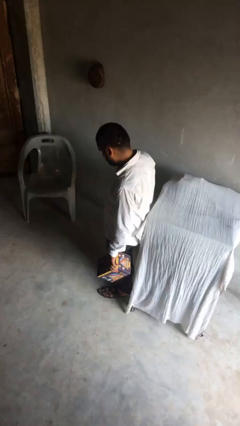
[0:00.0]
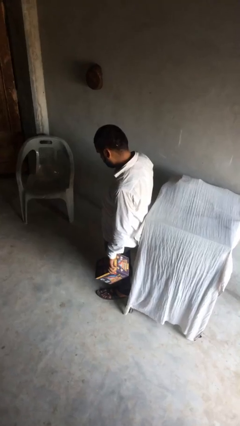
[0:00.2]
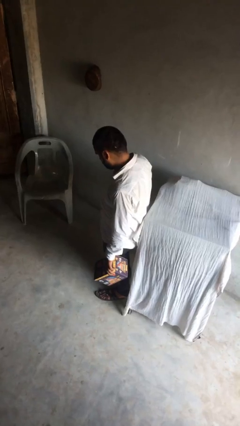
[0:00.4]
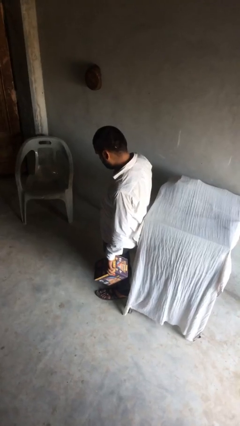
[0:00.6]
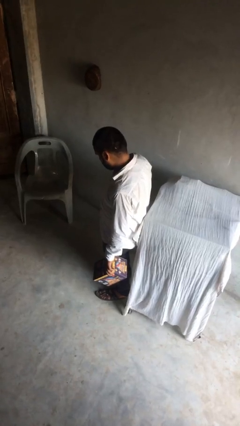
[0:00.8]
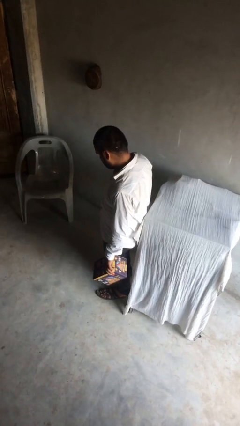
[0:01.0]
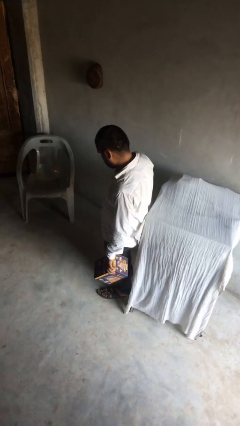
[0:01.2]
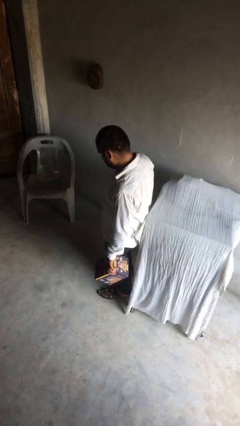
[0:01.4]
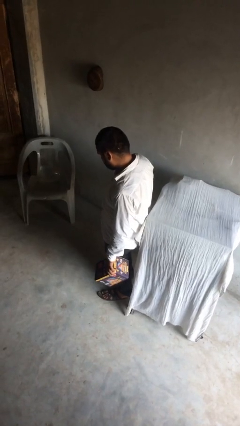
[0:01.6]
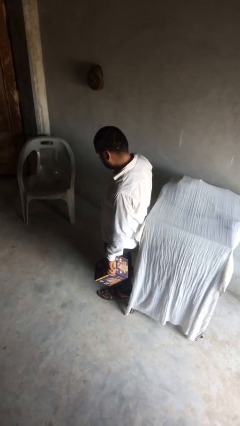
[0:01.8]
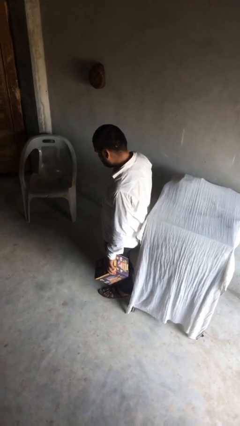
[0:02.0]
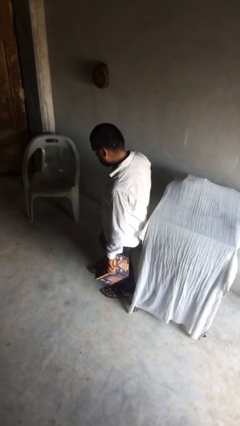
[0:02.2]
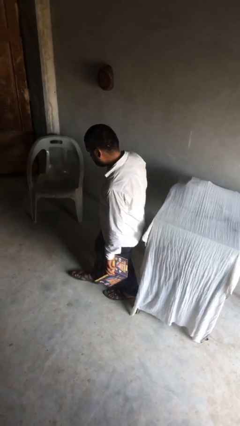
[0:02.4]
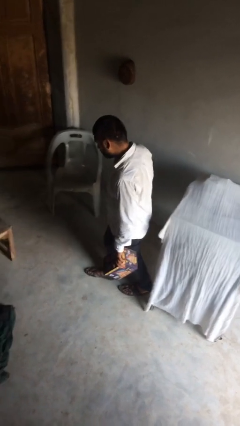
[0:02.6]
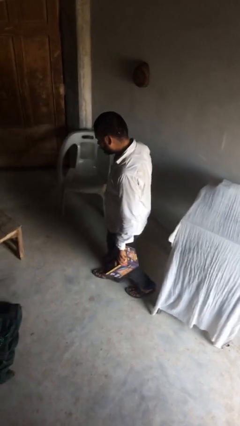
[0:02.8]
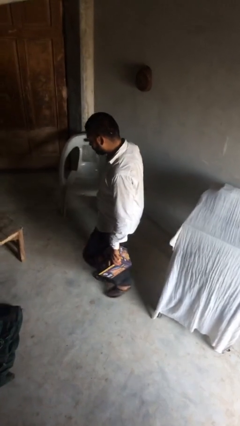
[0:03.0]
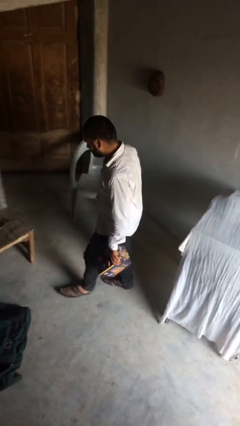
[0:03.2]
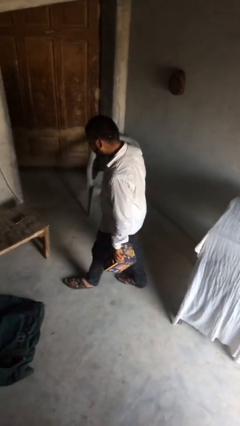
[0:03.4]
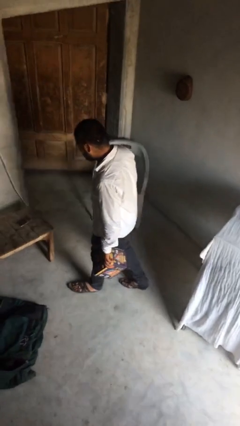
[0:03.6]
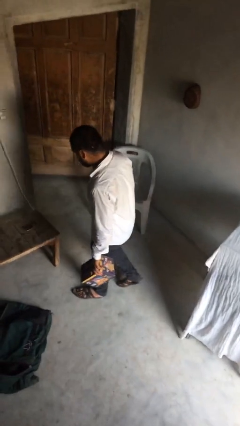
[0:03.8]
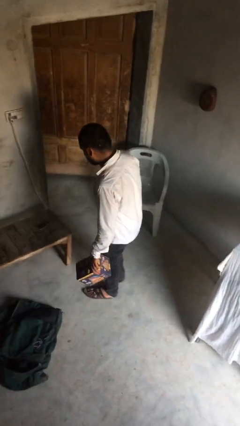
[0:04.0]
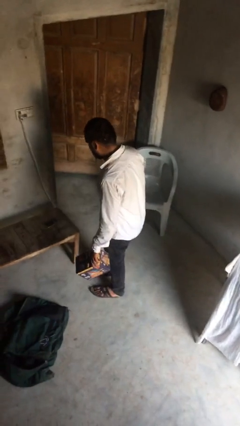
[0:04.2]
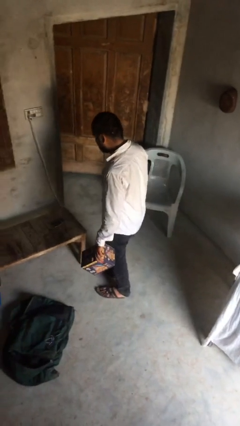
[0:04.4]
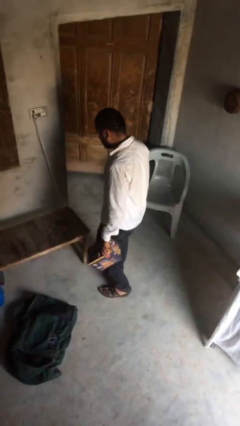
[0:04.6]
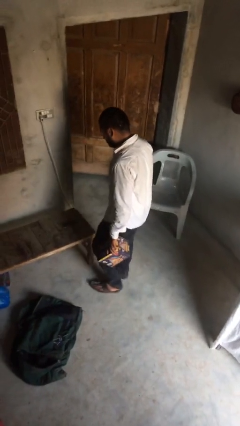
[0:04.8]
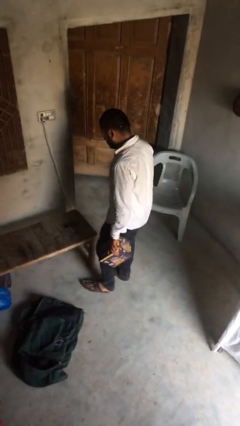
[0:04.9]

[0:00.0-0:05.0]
person puts down object on table

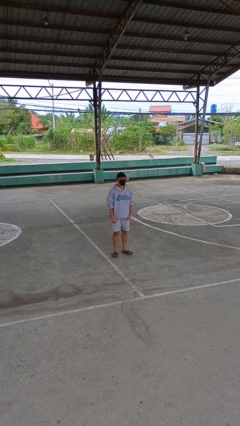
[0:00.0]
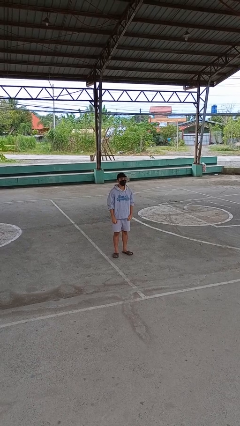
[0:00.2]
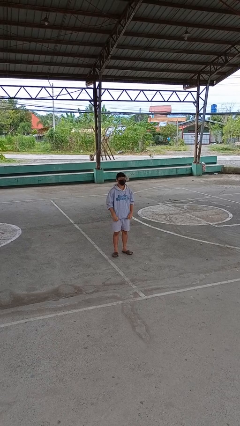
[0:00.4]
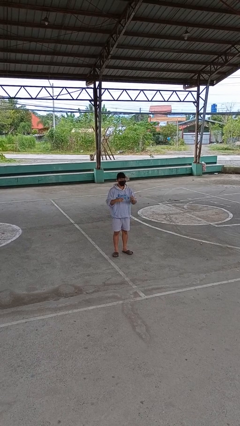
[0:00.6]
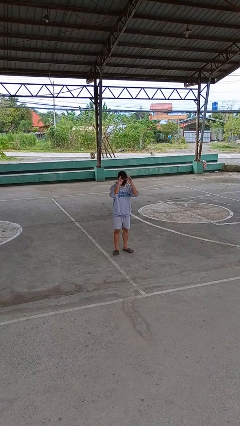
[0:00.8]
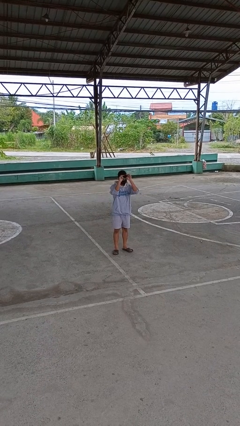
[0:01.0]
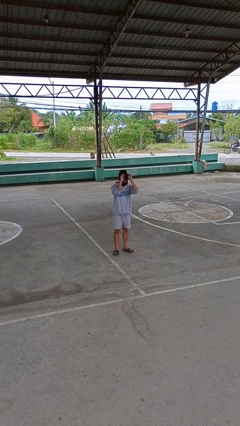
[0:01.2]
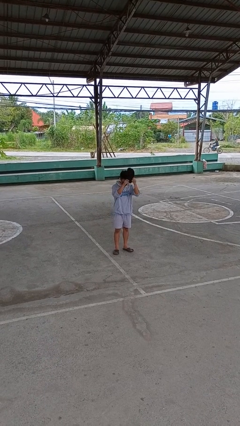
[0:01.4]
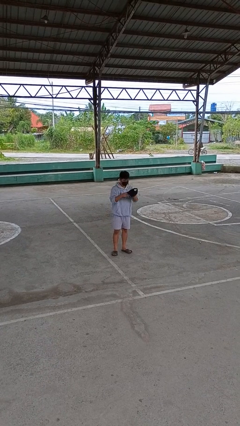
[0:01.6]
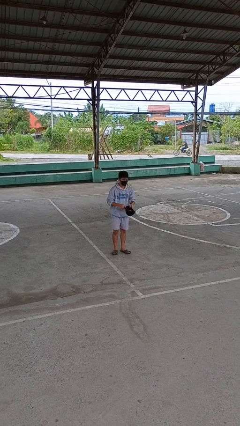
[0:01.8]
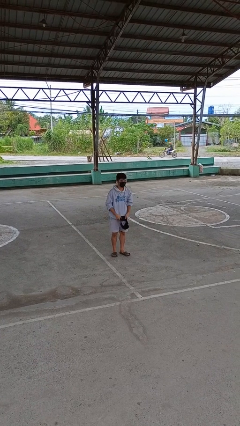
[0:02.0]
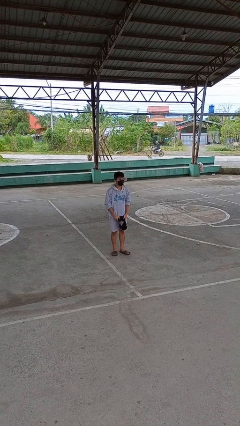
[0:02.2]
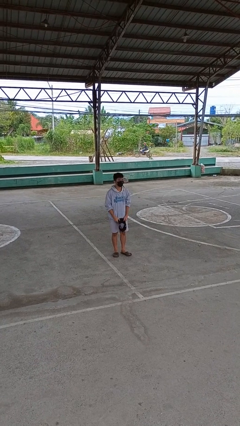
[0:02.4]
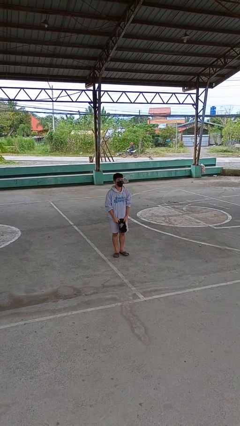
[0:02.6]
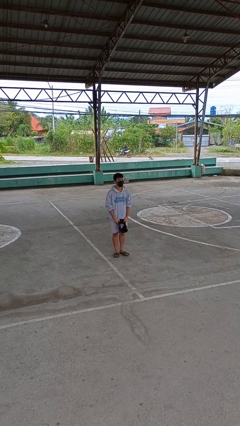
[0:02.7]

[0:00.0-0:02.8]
person takes off hat

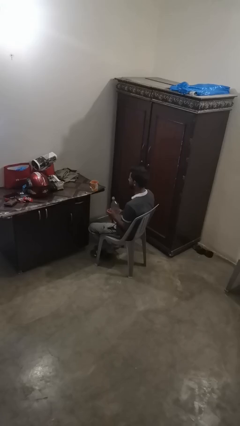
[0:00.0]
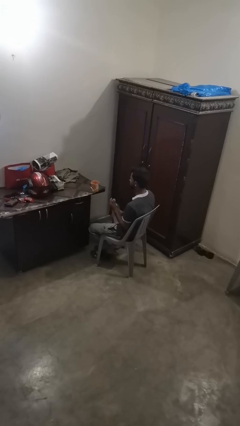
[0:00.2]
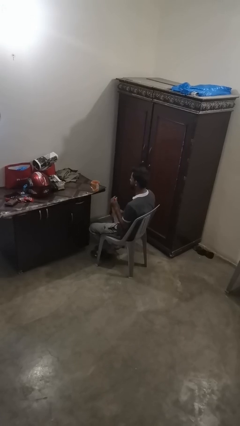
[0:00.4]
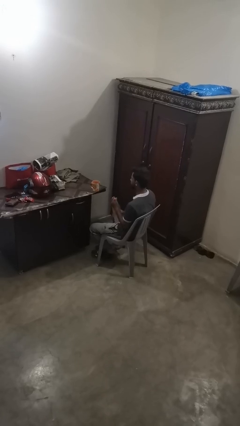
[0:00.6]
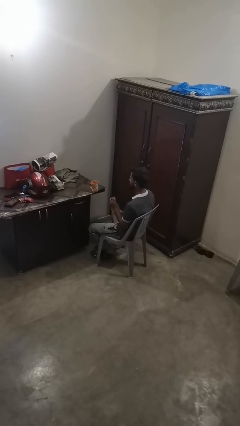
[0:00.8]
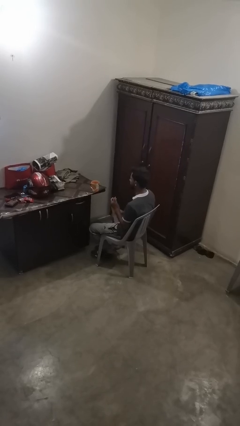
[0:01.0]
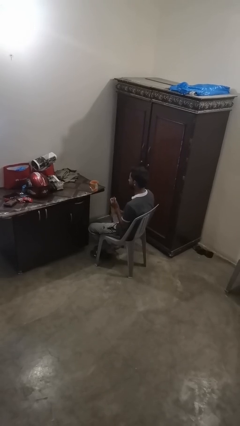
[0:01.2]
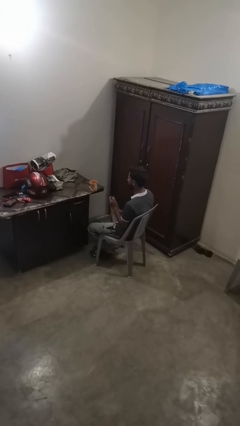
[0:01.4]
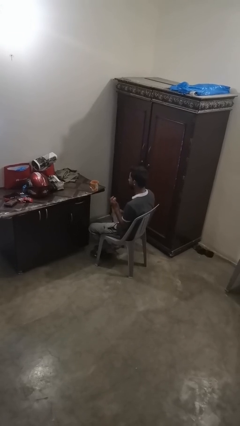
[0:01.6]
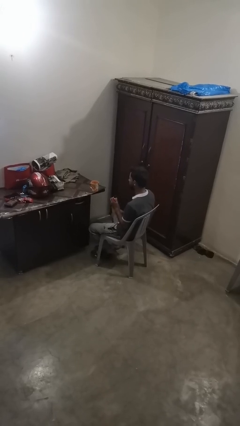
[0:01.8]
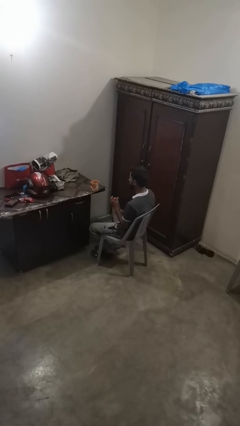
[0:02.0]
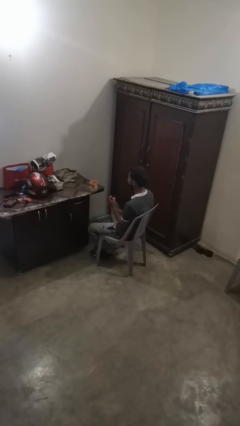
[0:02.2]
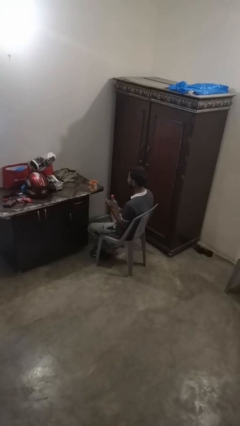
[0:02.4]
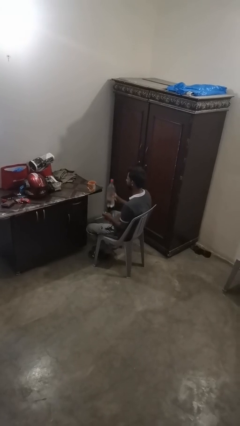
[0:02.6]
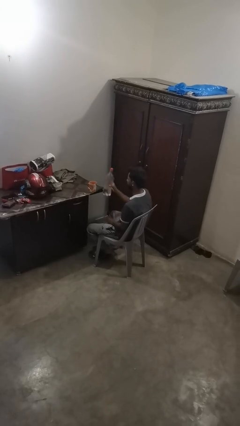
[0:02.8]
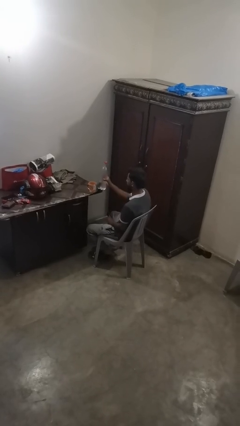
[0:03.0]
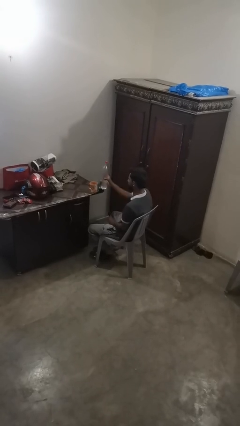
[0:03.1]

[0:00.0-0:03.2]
person screws lid to bottle

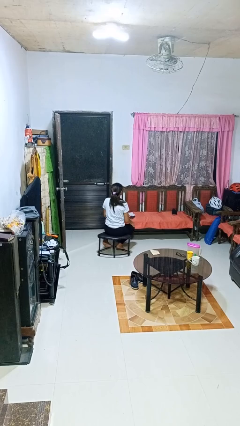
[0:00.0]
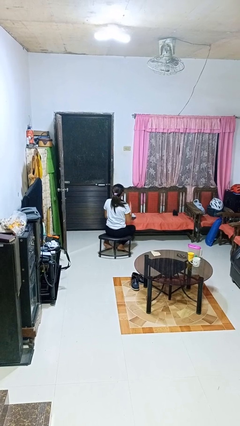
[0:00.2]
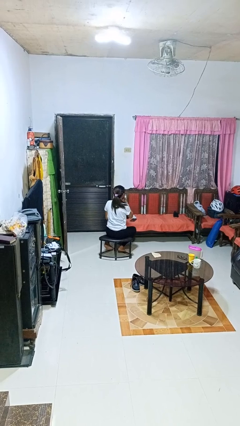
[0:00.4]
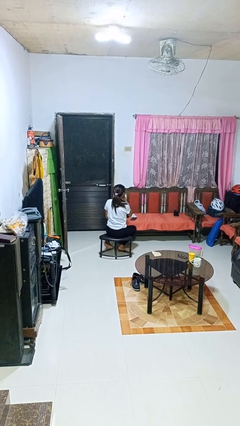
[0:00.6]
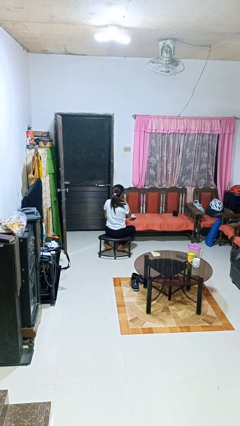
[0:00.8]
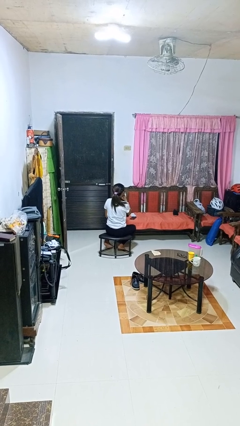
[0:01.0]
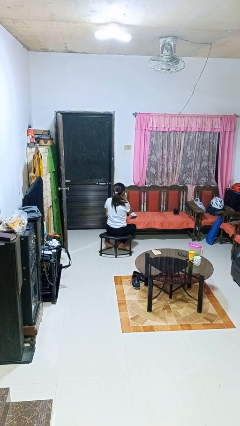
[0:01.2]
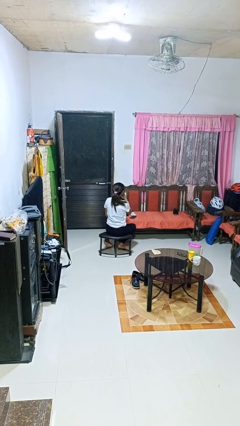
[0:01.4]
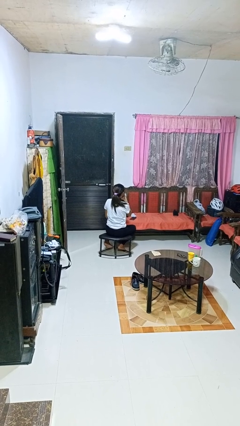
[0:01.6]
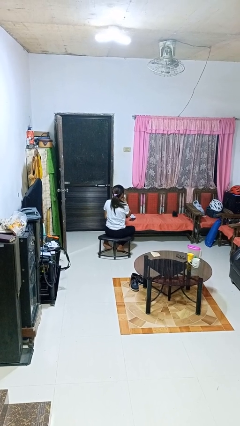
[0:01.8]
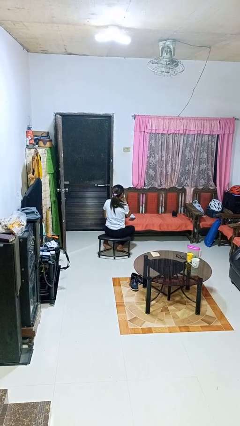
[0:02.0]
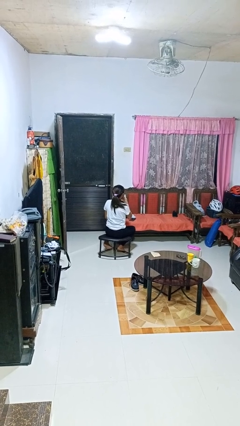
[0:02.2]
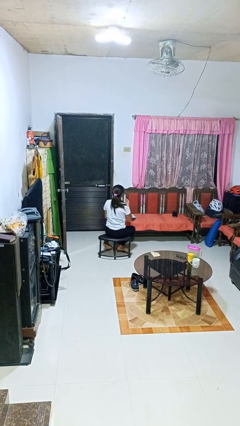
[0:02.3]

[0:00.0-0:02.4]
person strokes chin

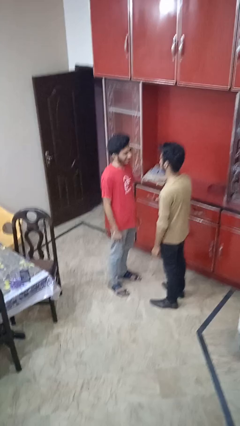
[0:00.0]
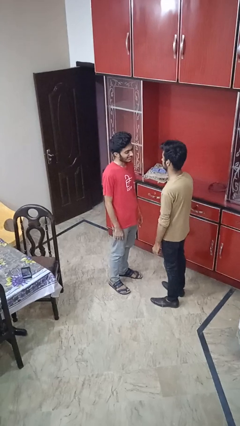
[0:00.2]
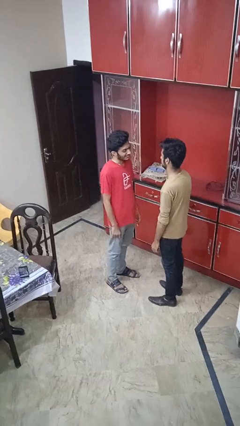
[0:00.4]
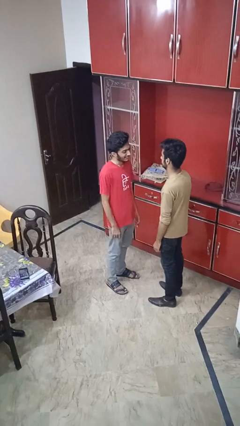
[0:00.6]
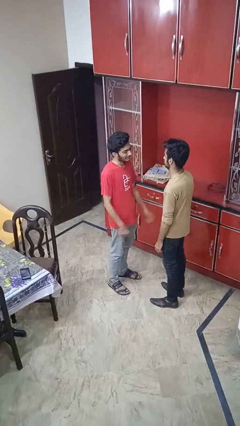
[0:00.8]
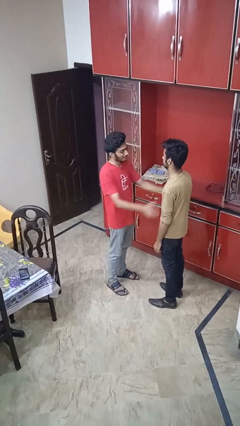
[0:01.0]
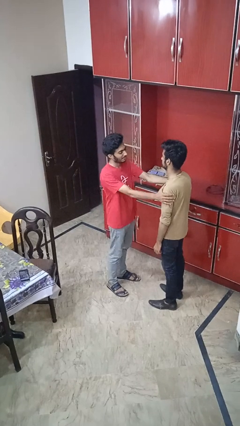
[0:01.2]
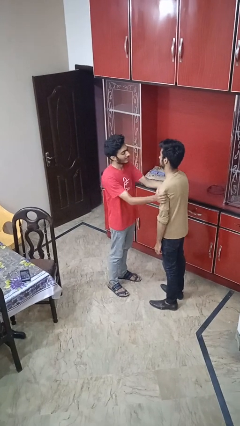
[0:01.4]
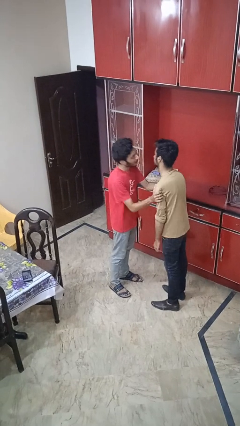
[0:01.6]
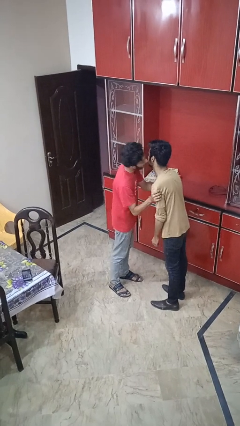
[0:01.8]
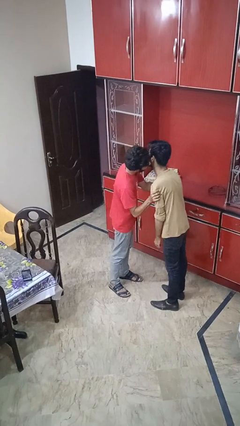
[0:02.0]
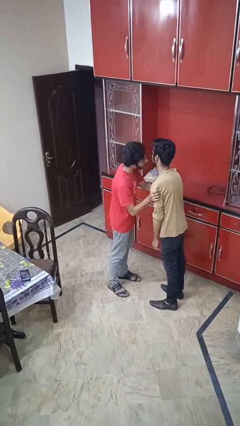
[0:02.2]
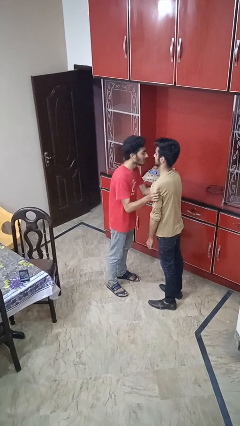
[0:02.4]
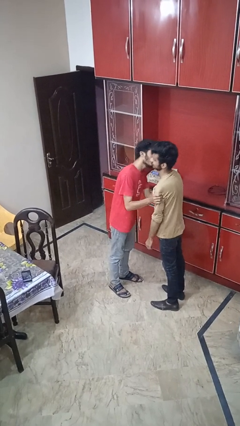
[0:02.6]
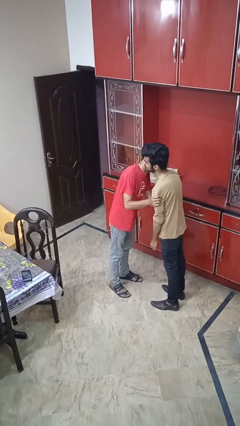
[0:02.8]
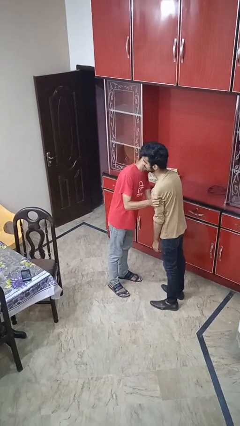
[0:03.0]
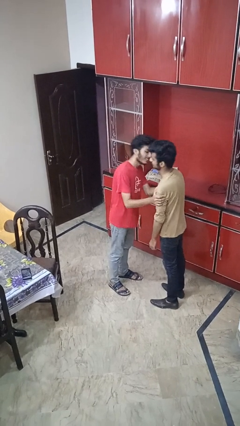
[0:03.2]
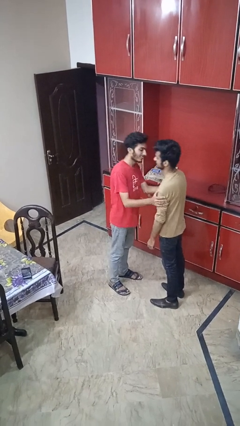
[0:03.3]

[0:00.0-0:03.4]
person kisses cheek of person

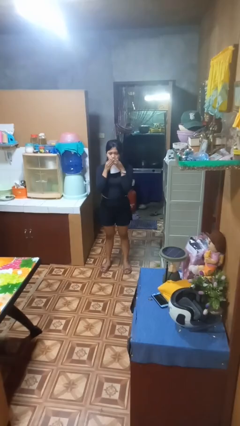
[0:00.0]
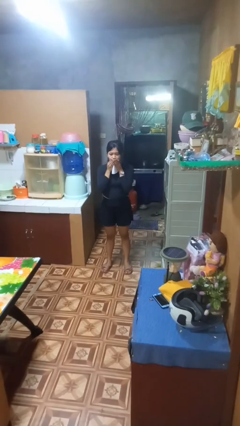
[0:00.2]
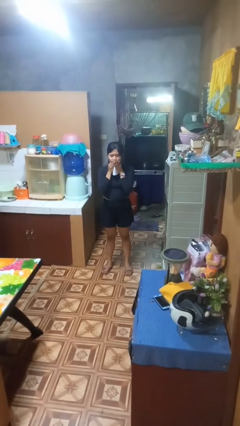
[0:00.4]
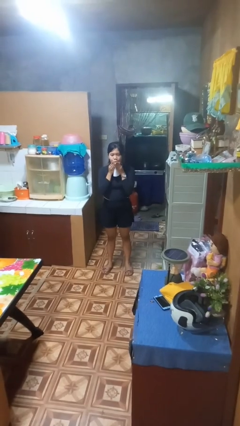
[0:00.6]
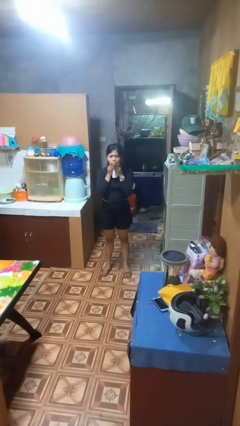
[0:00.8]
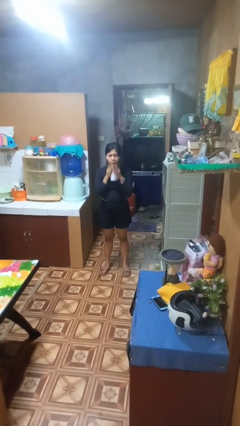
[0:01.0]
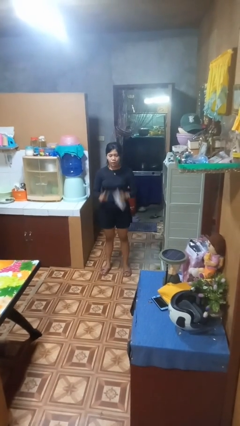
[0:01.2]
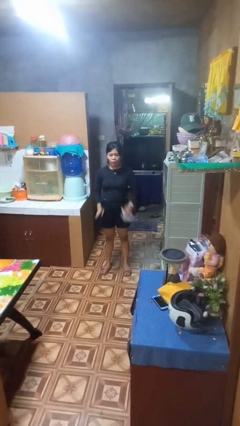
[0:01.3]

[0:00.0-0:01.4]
person wipes mouth with napkin
